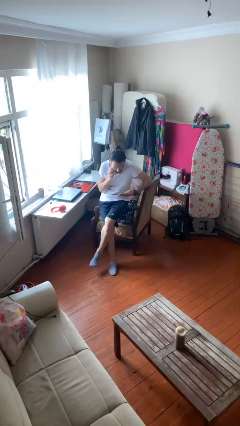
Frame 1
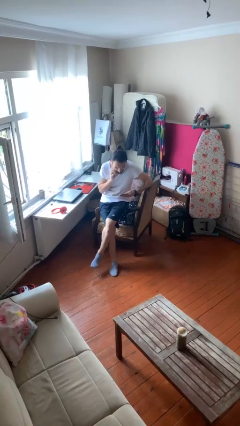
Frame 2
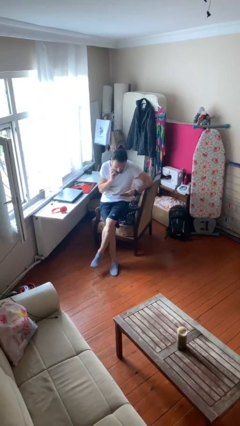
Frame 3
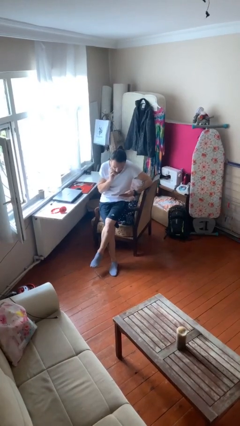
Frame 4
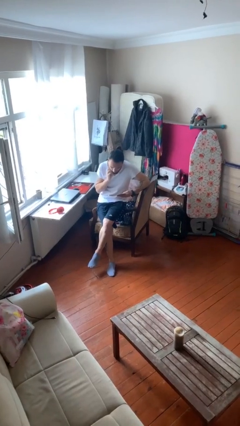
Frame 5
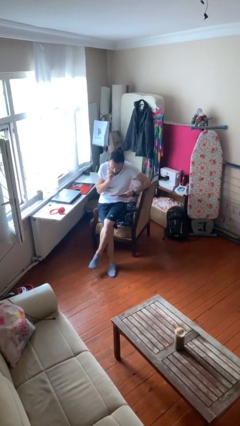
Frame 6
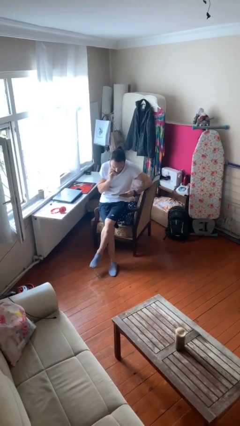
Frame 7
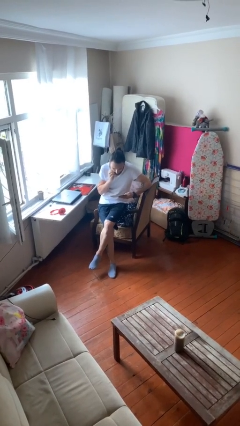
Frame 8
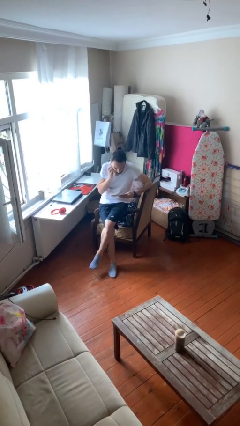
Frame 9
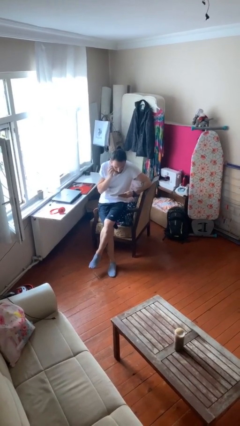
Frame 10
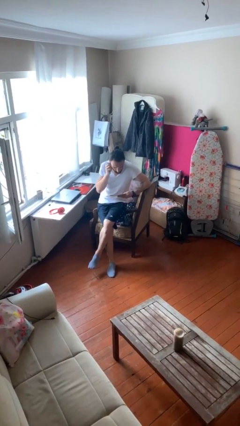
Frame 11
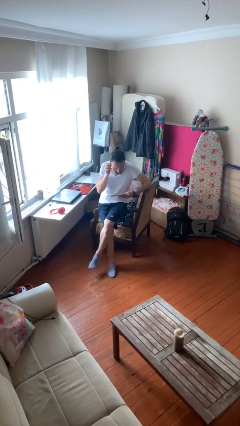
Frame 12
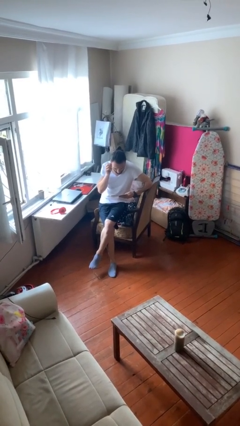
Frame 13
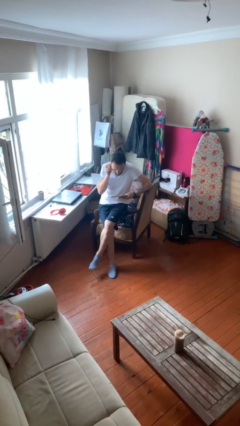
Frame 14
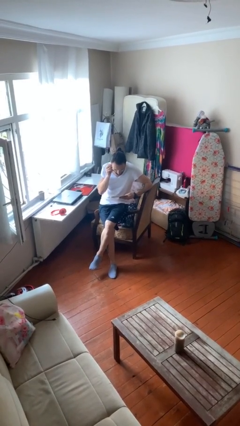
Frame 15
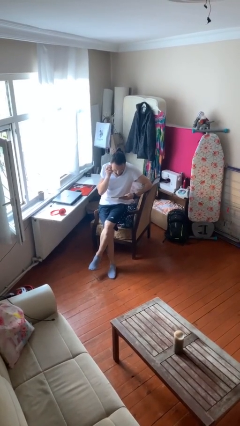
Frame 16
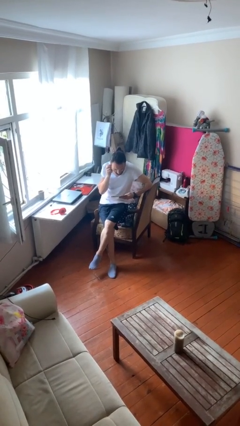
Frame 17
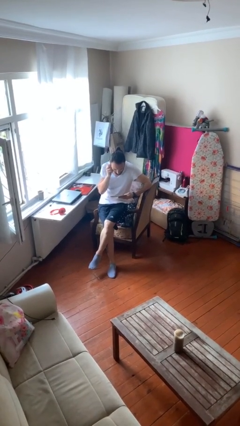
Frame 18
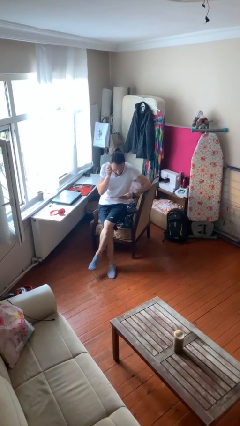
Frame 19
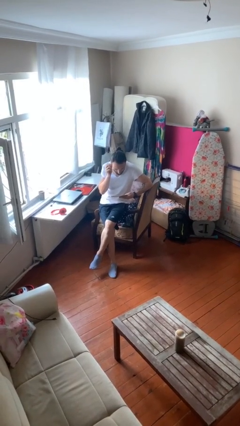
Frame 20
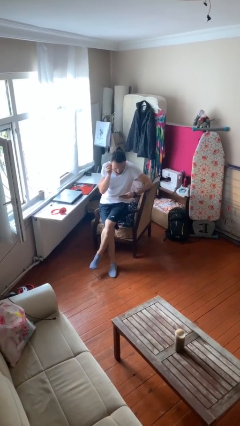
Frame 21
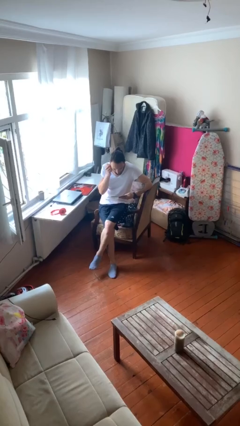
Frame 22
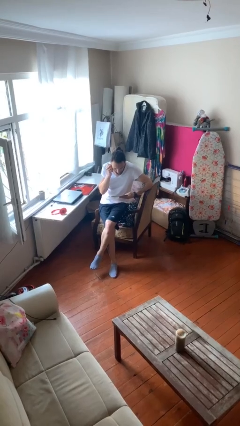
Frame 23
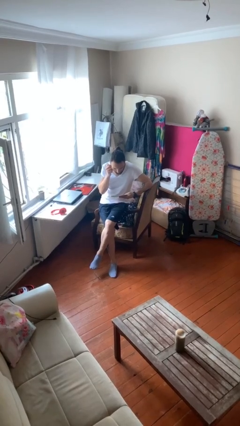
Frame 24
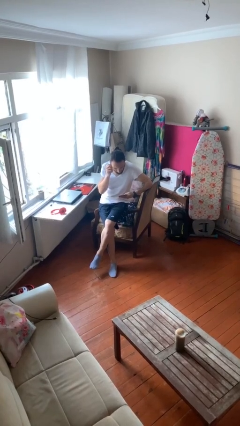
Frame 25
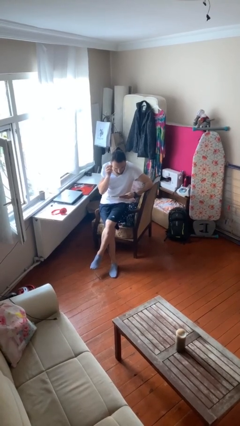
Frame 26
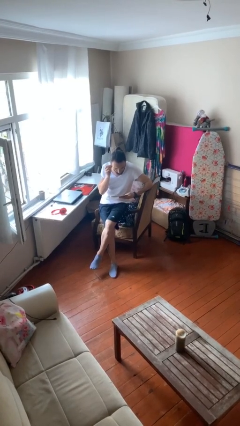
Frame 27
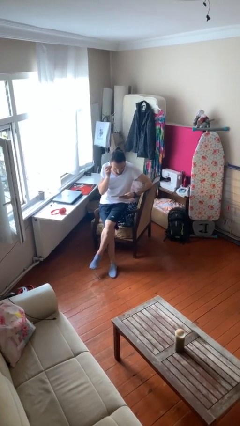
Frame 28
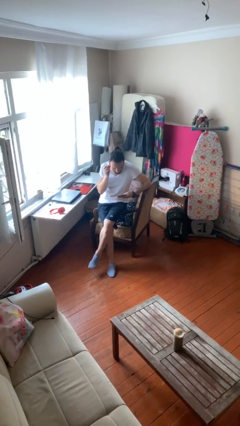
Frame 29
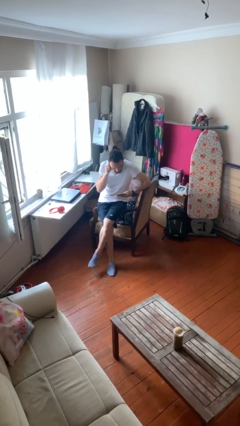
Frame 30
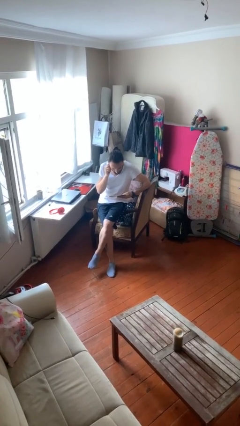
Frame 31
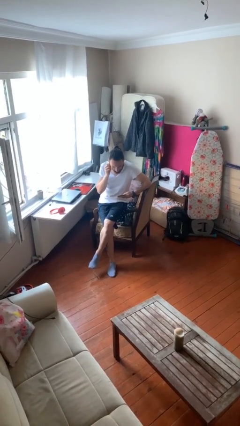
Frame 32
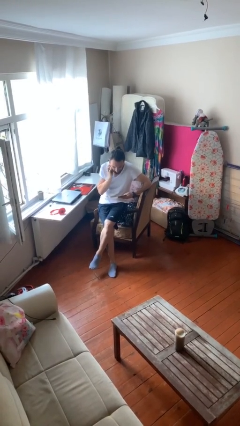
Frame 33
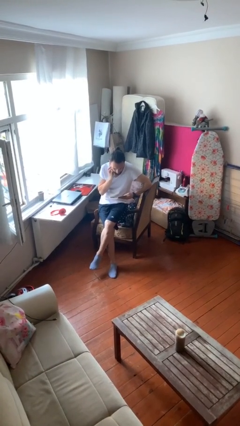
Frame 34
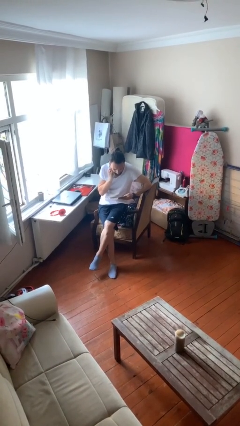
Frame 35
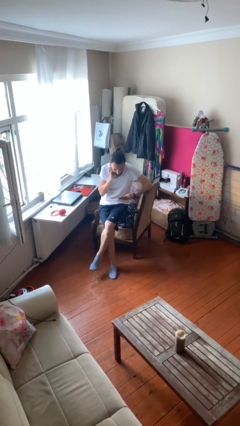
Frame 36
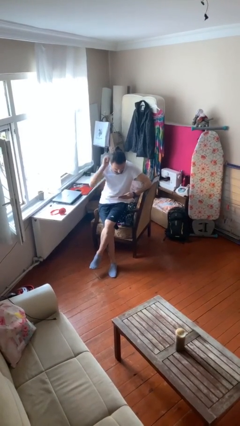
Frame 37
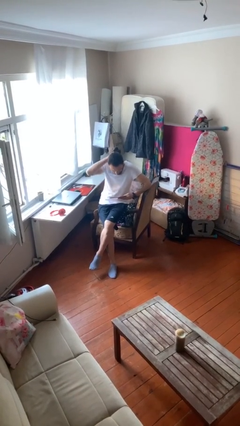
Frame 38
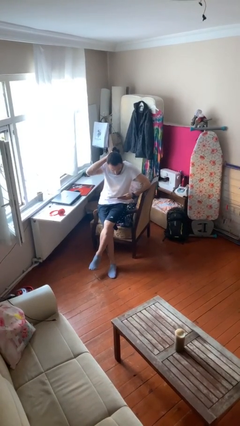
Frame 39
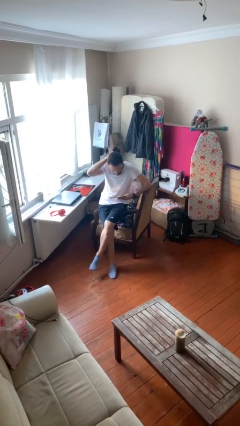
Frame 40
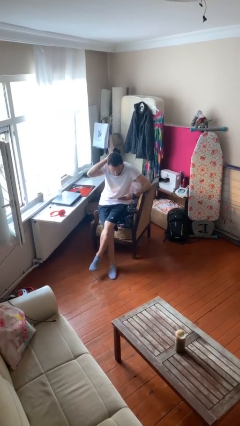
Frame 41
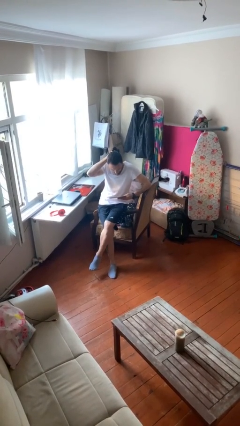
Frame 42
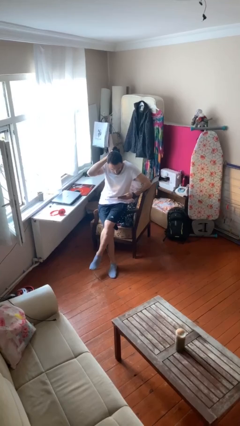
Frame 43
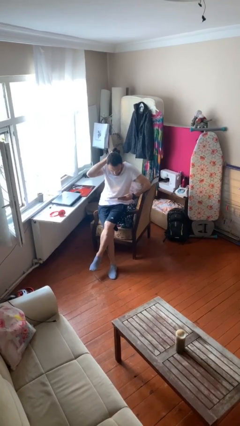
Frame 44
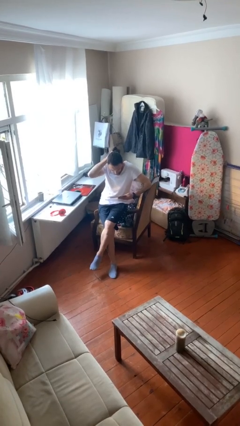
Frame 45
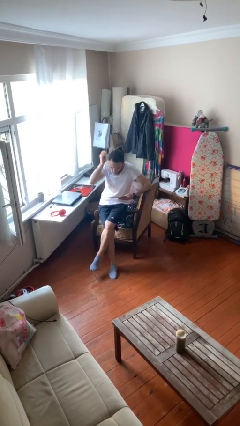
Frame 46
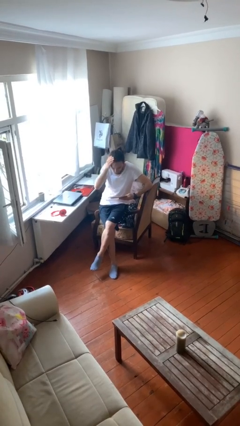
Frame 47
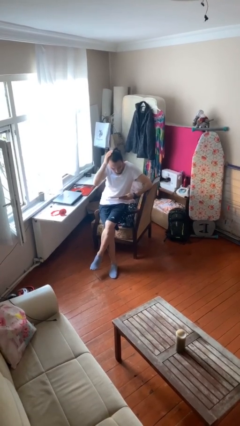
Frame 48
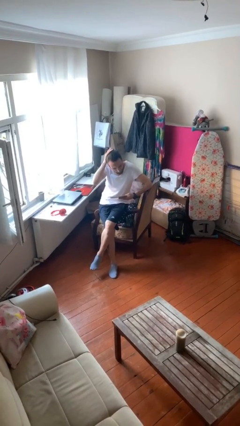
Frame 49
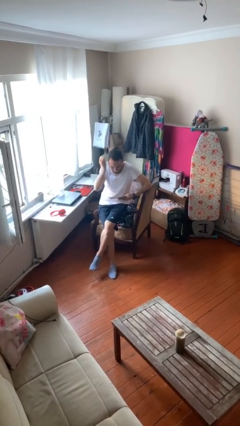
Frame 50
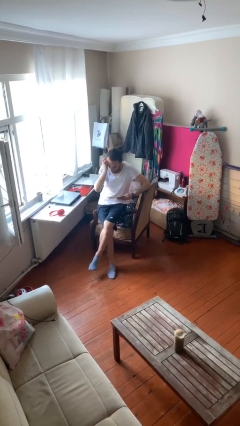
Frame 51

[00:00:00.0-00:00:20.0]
person reads document

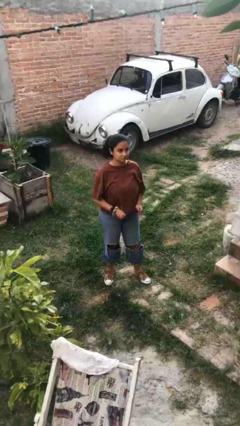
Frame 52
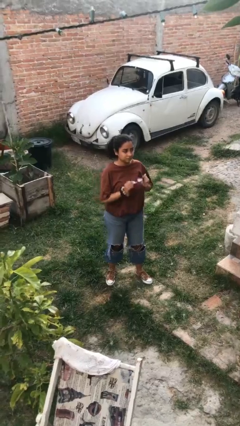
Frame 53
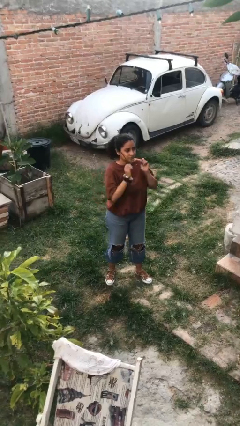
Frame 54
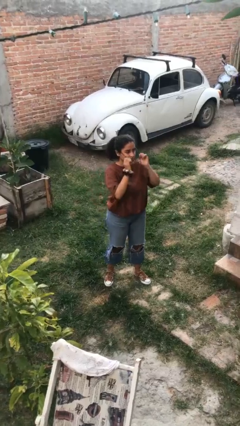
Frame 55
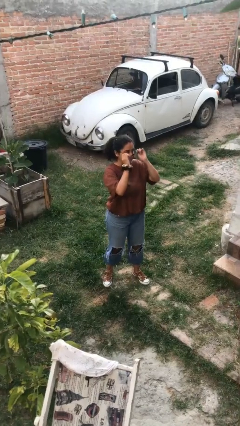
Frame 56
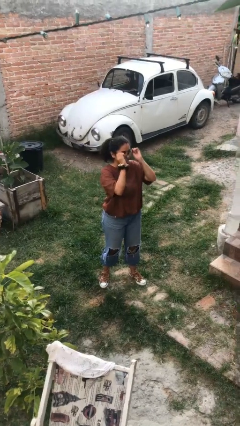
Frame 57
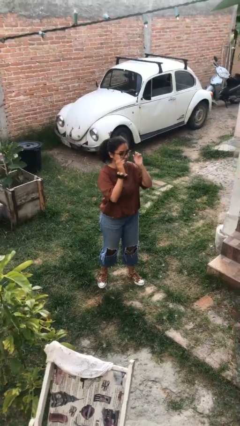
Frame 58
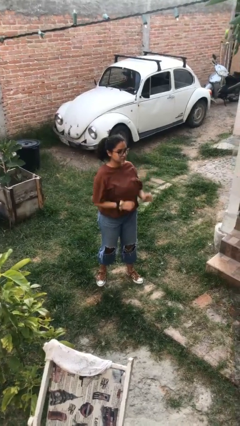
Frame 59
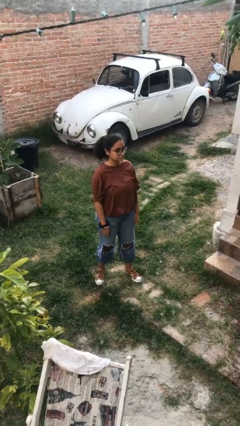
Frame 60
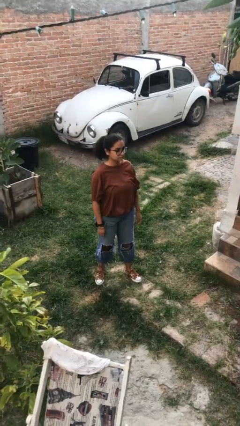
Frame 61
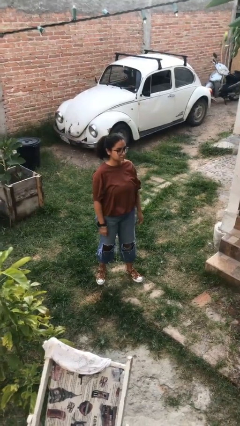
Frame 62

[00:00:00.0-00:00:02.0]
person puts on glasses

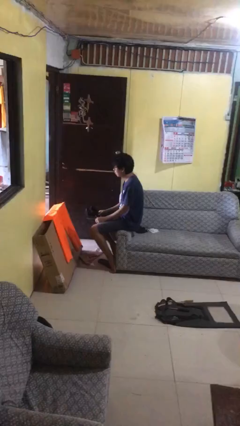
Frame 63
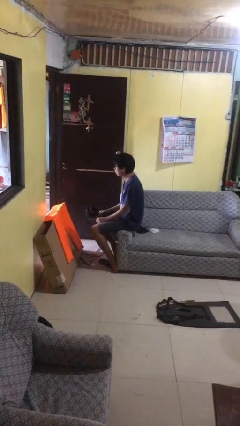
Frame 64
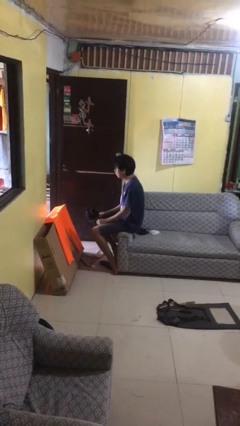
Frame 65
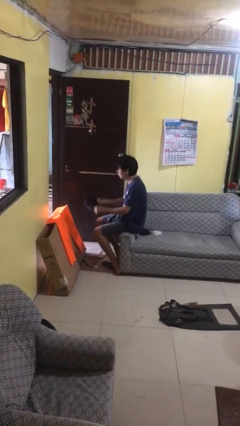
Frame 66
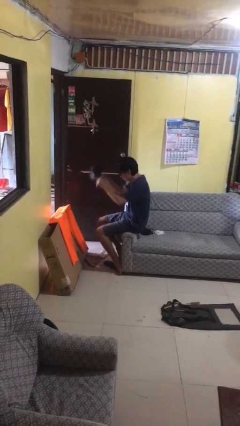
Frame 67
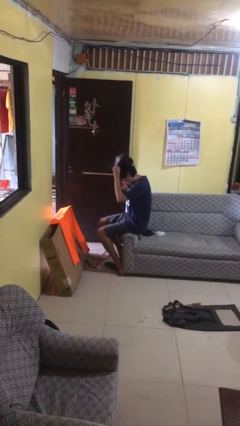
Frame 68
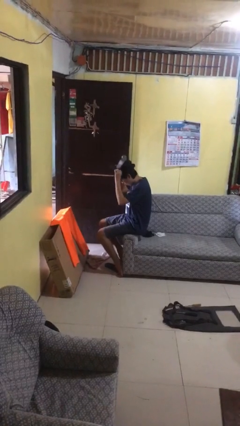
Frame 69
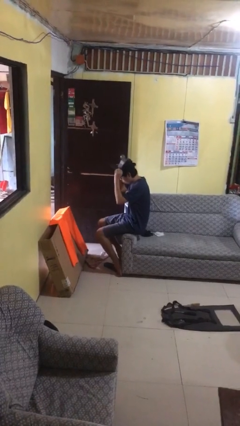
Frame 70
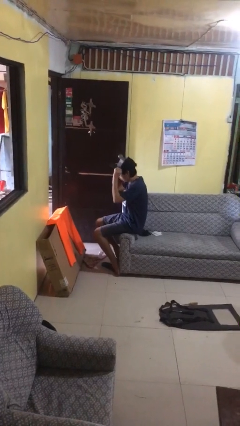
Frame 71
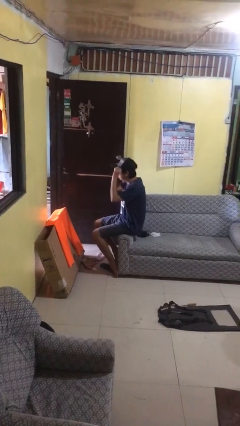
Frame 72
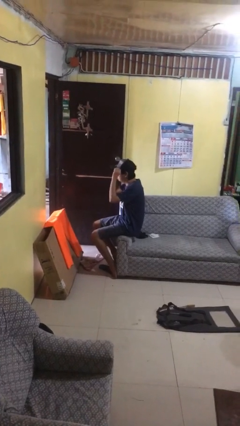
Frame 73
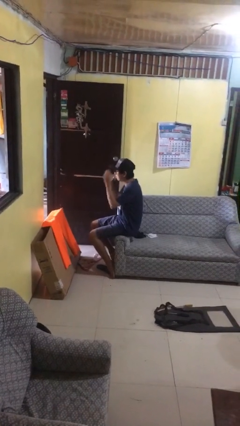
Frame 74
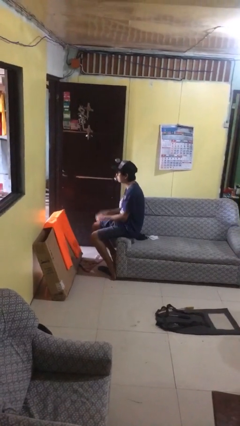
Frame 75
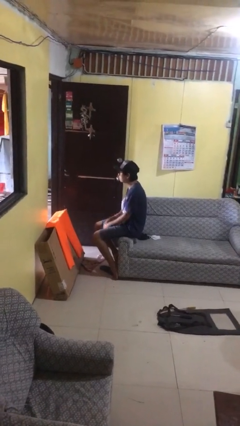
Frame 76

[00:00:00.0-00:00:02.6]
person puts on hat

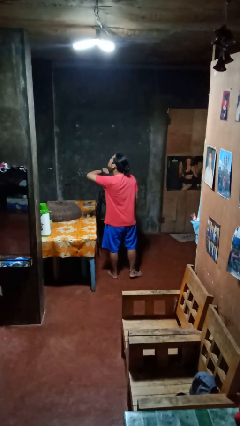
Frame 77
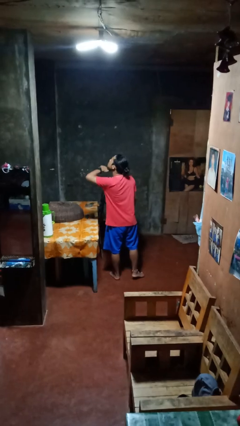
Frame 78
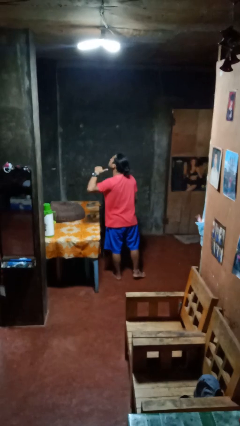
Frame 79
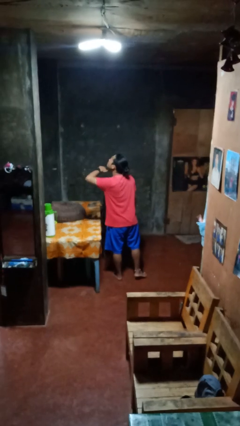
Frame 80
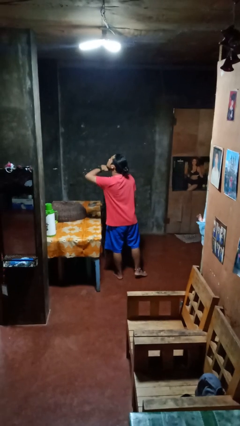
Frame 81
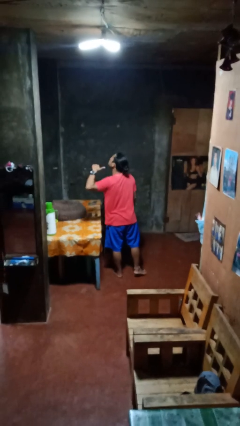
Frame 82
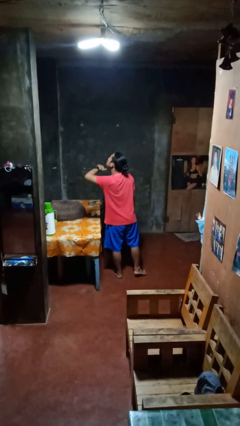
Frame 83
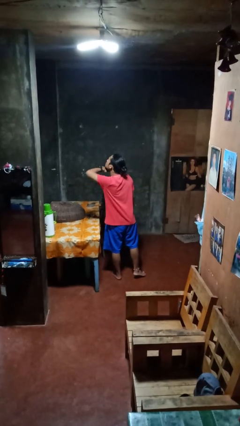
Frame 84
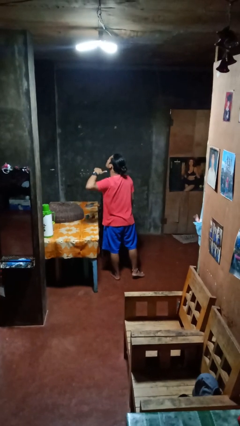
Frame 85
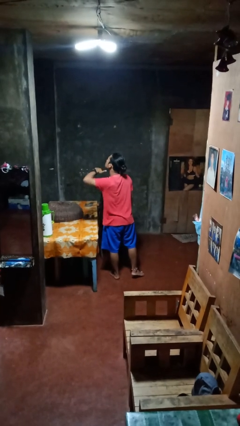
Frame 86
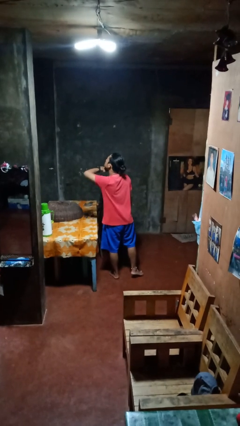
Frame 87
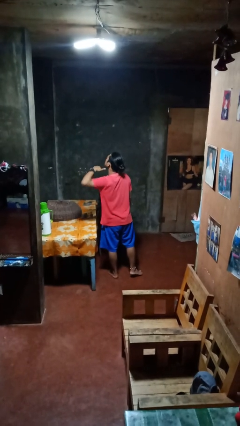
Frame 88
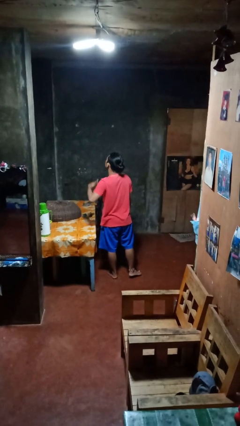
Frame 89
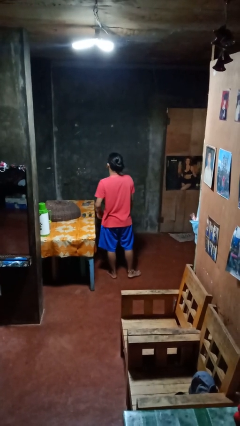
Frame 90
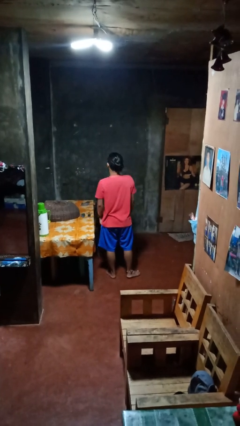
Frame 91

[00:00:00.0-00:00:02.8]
person gestures cut

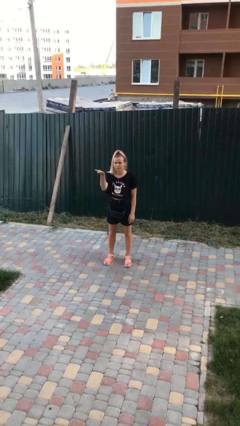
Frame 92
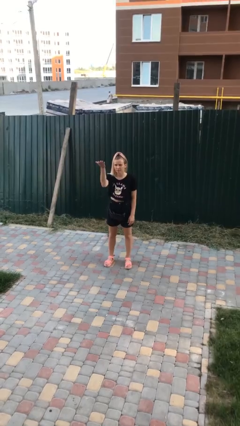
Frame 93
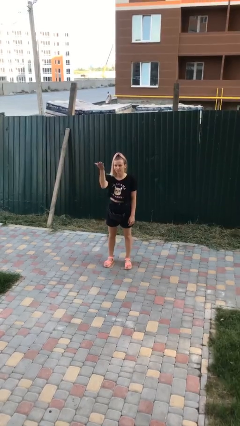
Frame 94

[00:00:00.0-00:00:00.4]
person gestures swipe up
